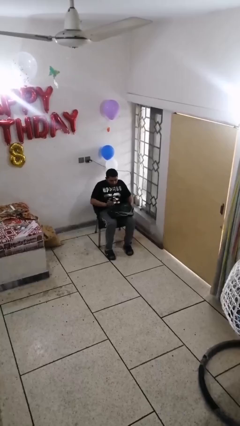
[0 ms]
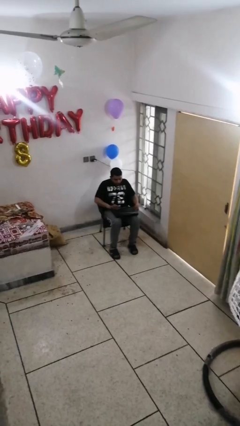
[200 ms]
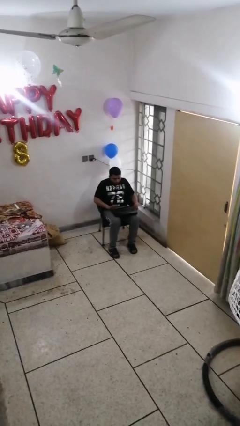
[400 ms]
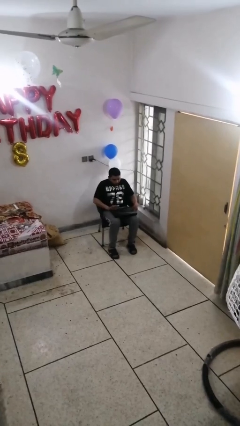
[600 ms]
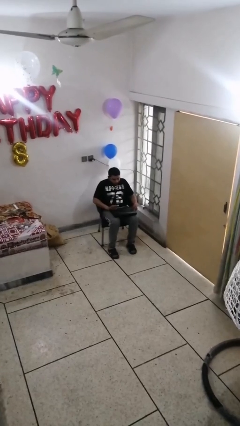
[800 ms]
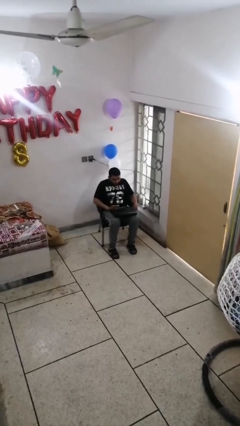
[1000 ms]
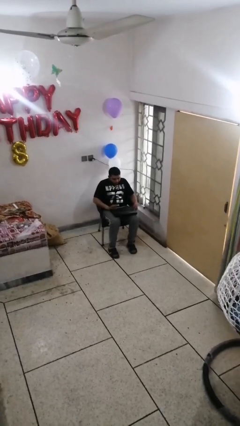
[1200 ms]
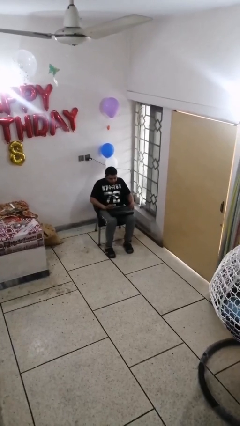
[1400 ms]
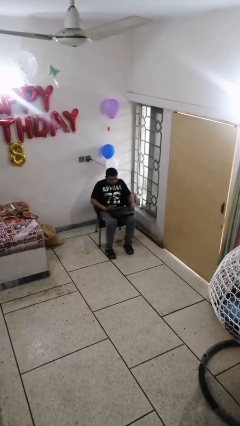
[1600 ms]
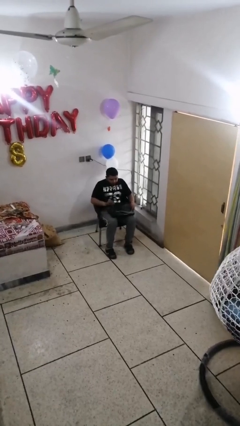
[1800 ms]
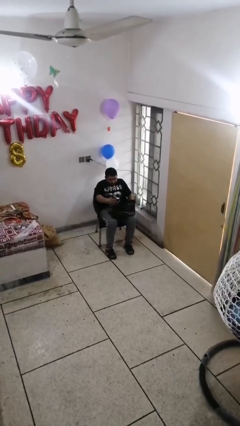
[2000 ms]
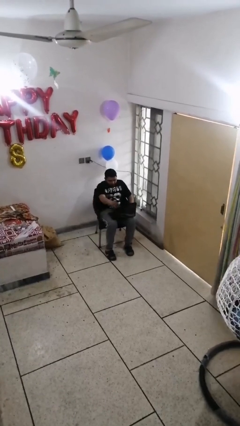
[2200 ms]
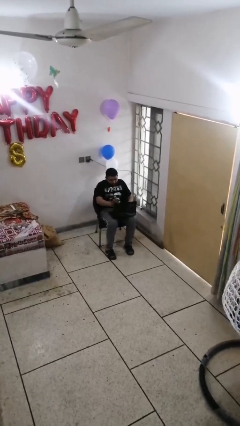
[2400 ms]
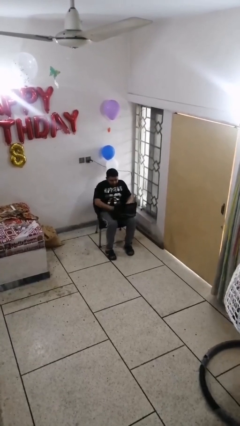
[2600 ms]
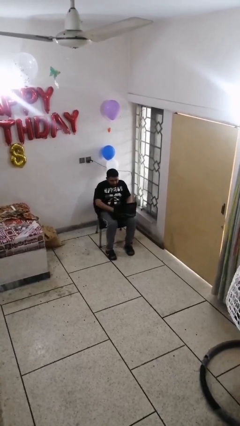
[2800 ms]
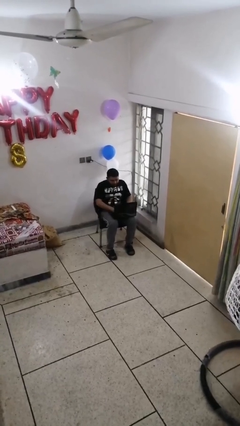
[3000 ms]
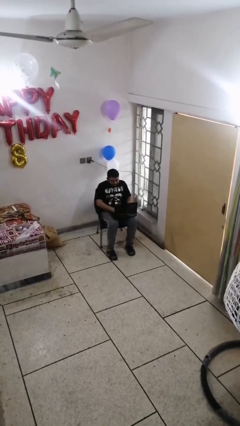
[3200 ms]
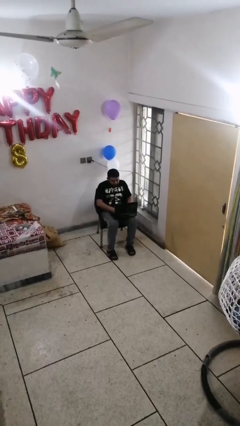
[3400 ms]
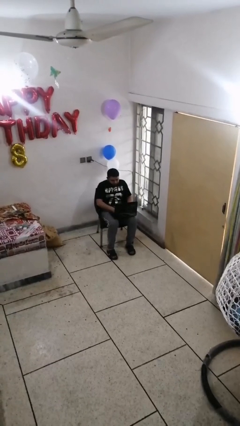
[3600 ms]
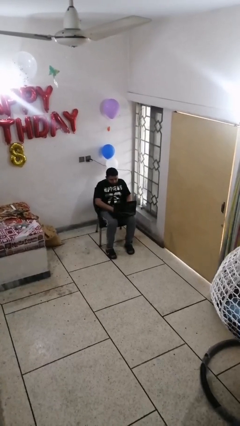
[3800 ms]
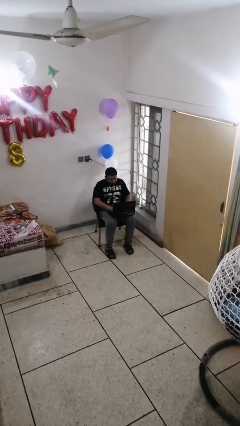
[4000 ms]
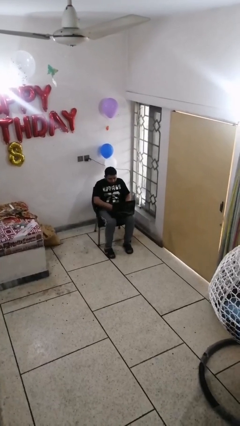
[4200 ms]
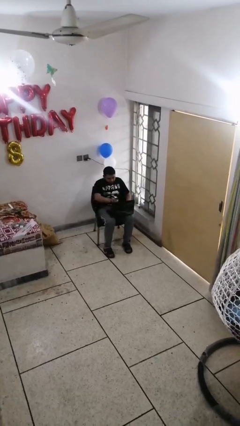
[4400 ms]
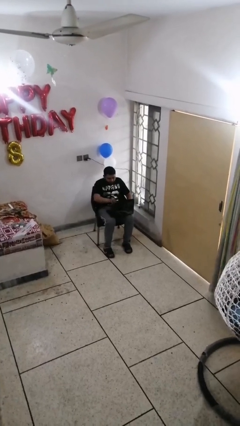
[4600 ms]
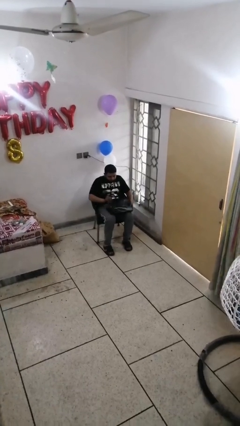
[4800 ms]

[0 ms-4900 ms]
person interacts with laptop

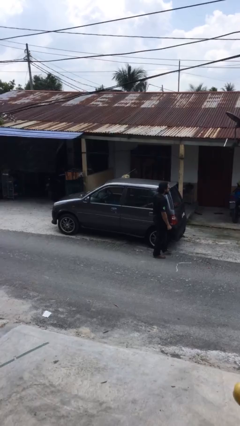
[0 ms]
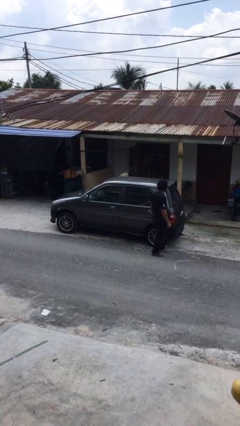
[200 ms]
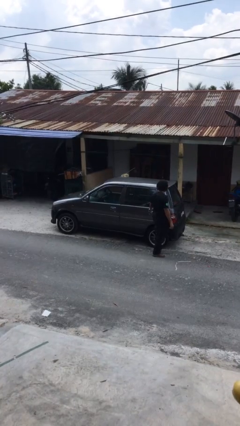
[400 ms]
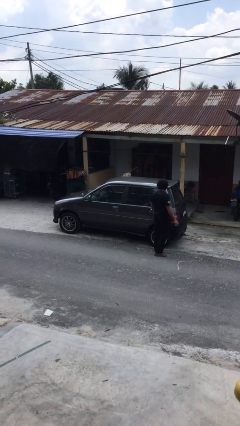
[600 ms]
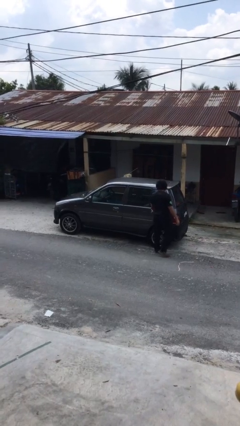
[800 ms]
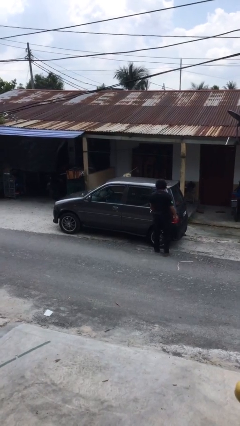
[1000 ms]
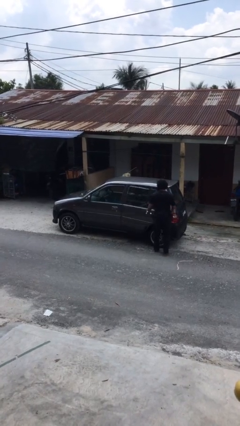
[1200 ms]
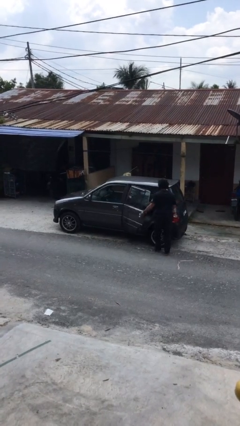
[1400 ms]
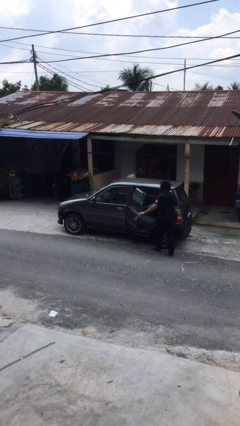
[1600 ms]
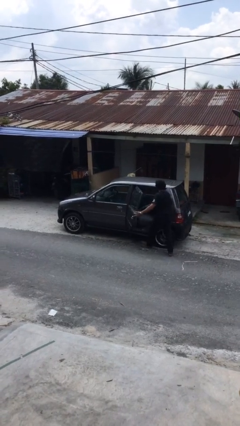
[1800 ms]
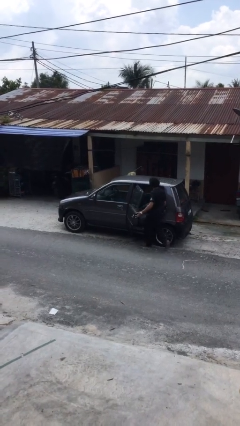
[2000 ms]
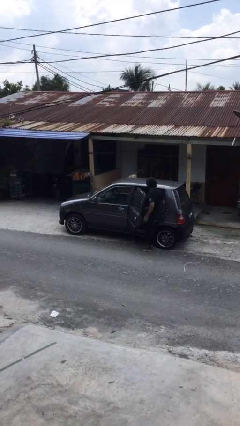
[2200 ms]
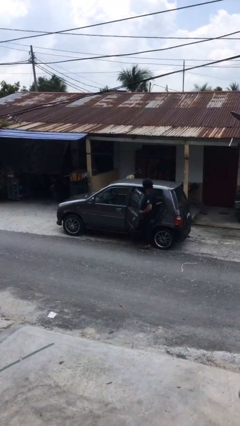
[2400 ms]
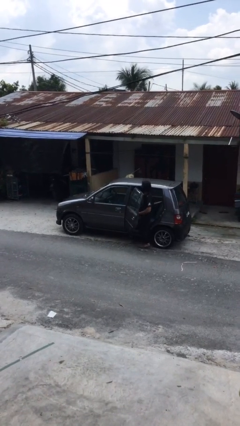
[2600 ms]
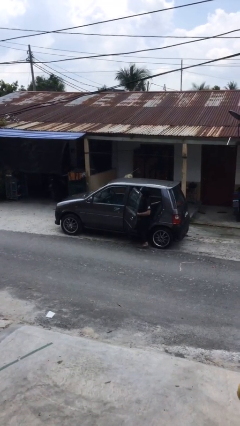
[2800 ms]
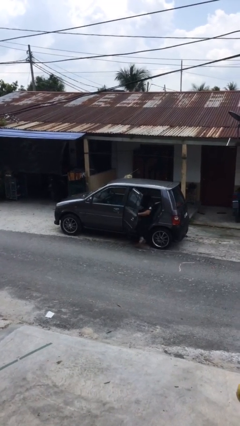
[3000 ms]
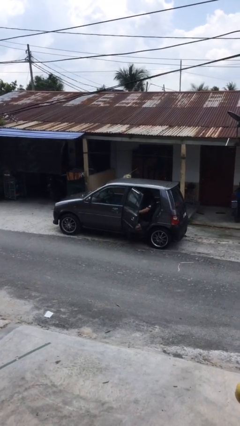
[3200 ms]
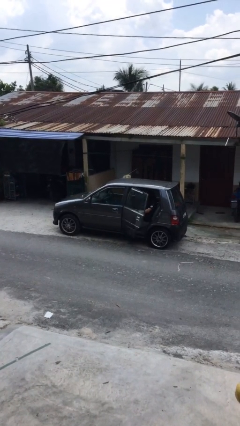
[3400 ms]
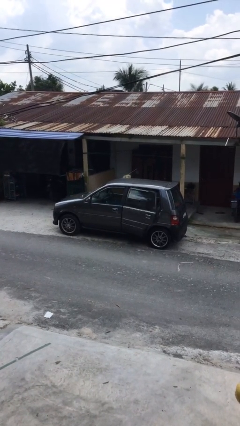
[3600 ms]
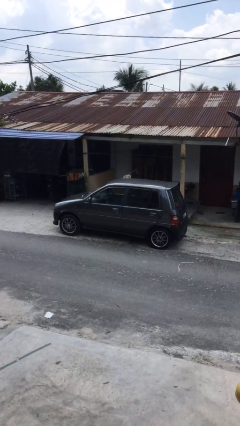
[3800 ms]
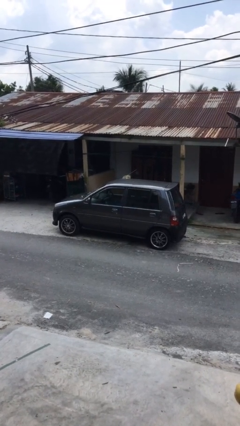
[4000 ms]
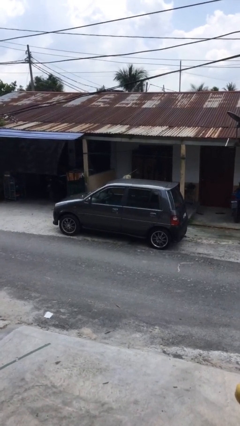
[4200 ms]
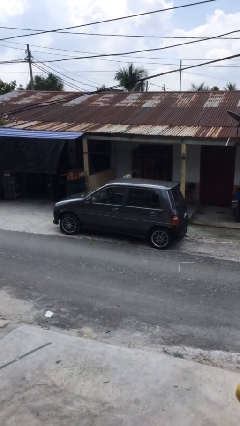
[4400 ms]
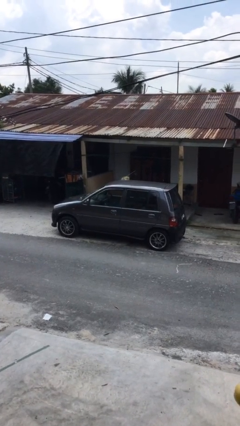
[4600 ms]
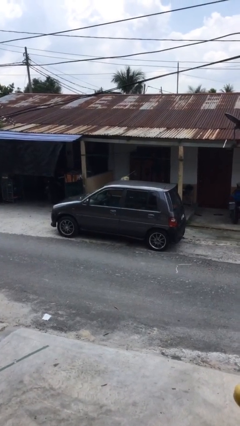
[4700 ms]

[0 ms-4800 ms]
car picks up person

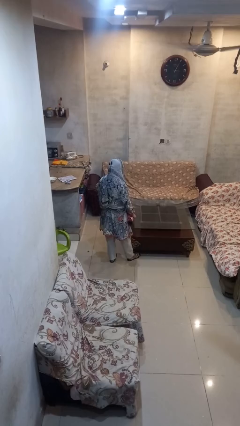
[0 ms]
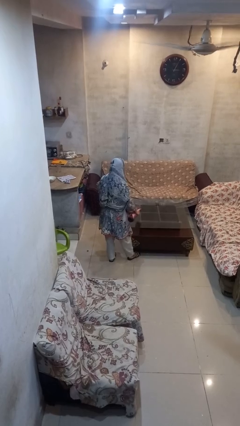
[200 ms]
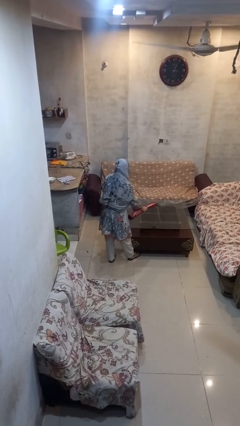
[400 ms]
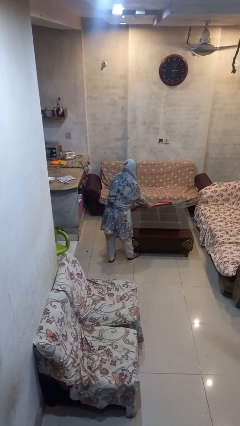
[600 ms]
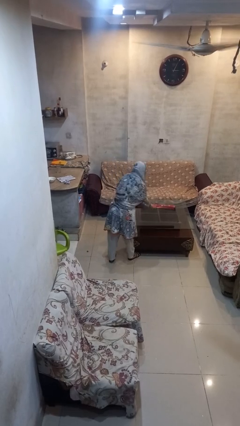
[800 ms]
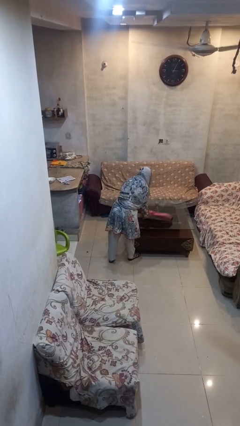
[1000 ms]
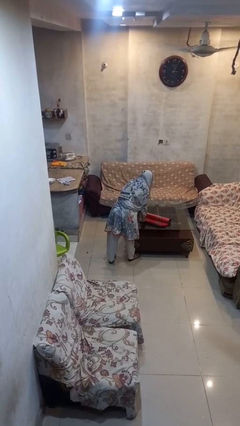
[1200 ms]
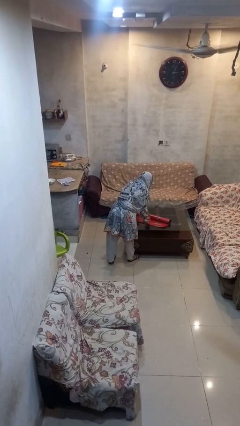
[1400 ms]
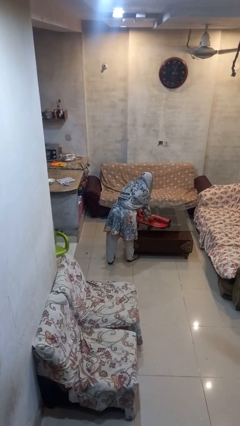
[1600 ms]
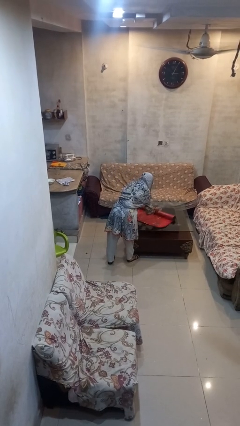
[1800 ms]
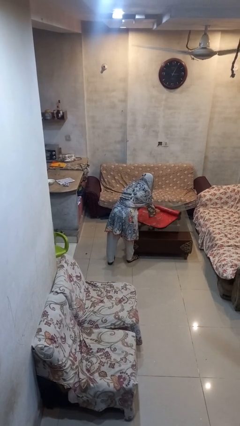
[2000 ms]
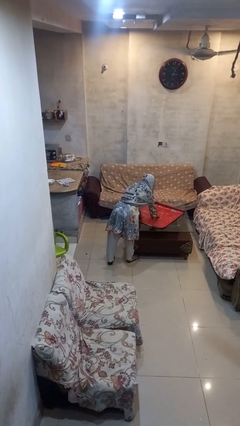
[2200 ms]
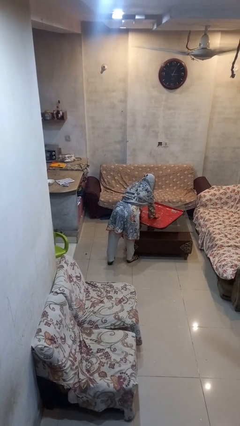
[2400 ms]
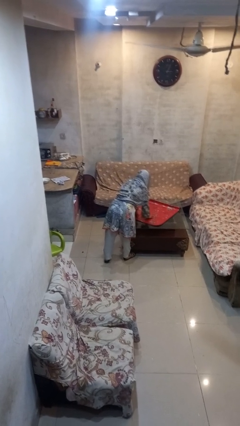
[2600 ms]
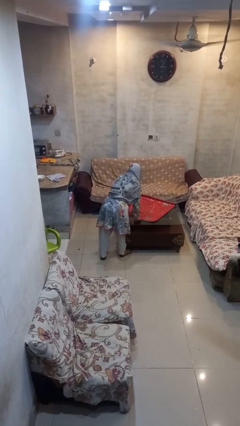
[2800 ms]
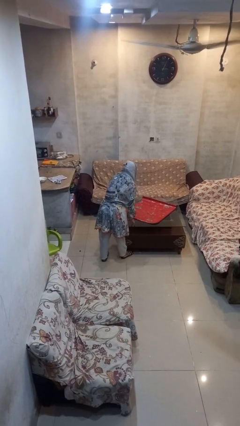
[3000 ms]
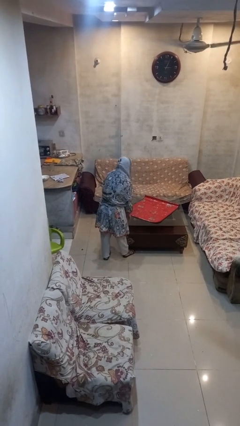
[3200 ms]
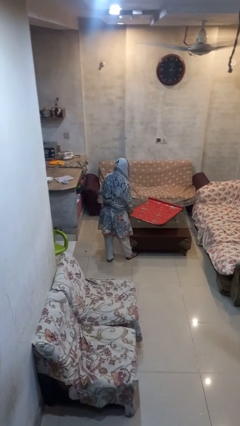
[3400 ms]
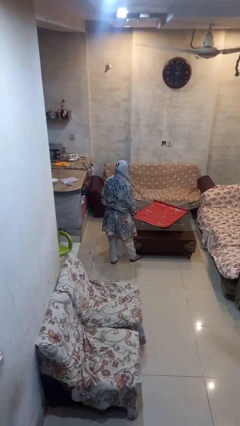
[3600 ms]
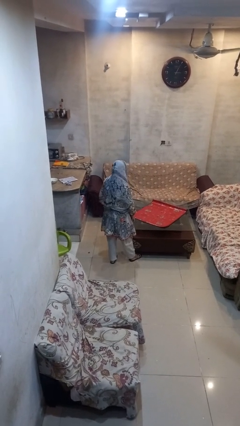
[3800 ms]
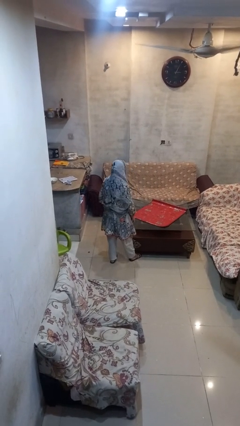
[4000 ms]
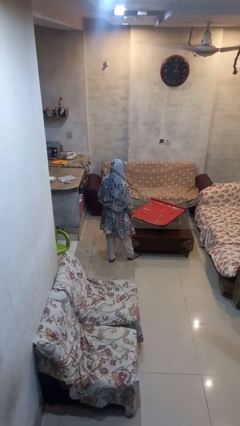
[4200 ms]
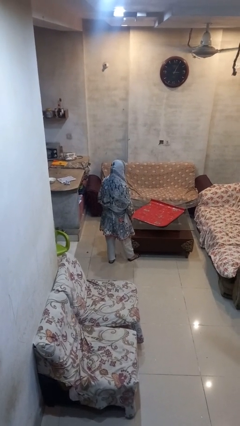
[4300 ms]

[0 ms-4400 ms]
person spreads tablecloth

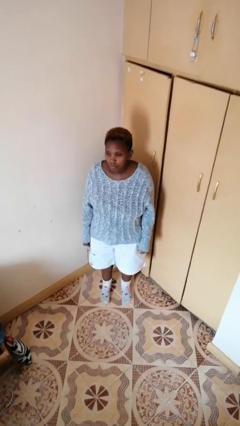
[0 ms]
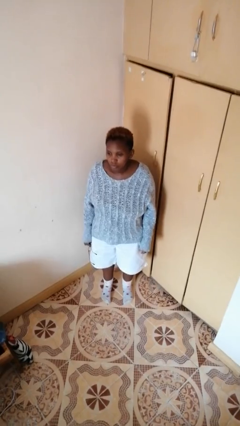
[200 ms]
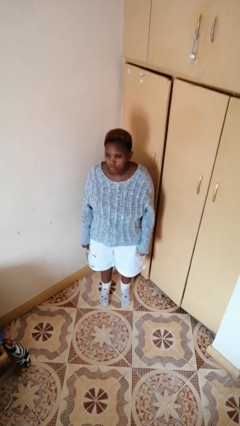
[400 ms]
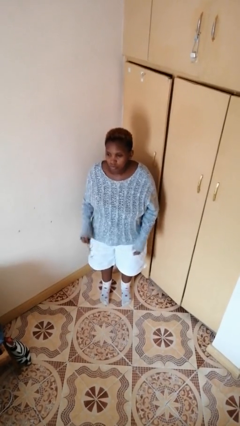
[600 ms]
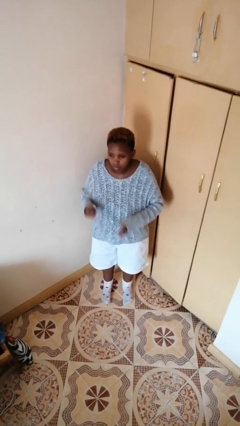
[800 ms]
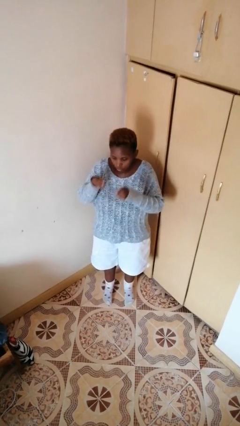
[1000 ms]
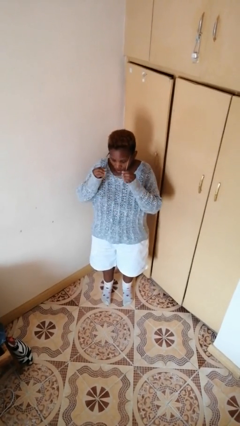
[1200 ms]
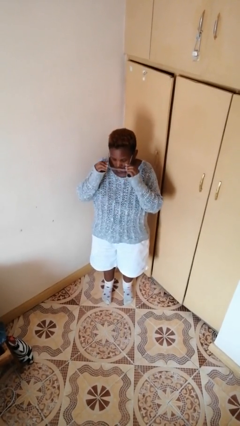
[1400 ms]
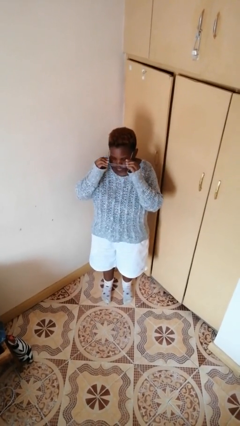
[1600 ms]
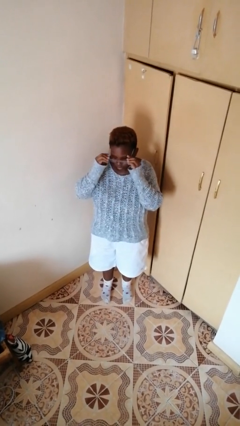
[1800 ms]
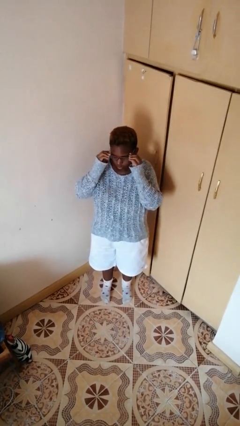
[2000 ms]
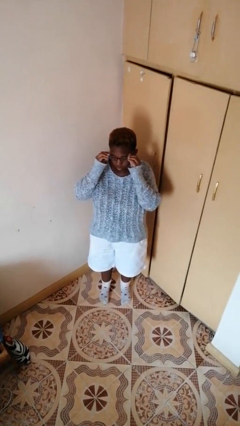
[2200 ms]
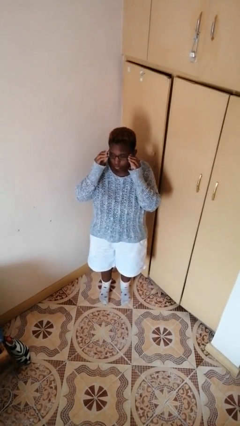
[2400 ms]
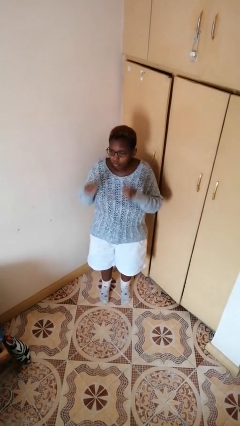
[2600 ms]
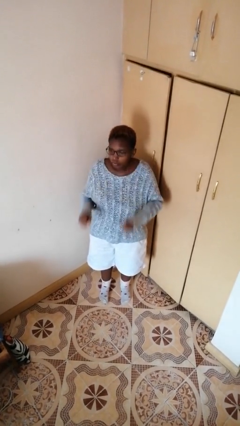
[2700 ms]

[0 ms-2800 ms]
person puts on glasses

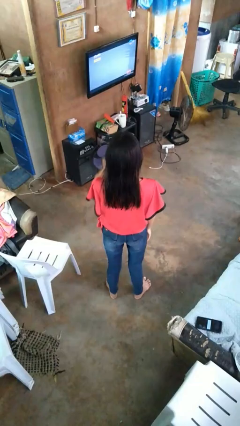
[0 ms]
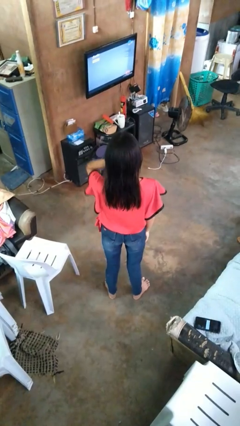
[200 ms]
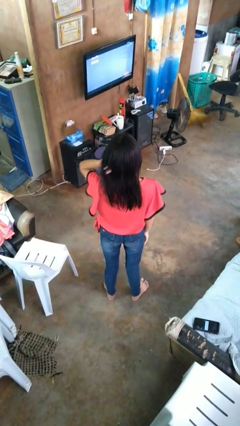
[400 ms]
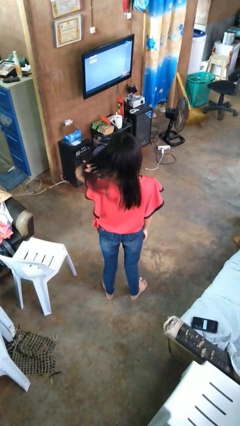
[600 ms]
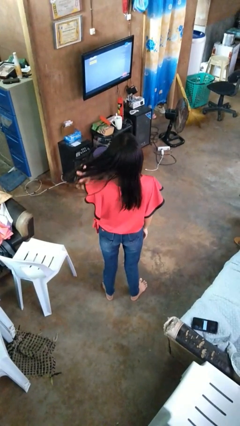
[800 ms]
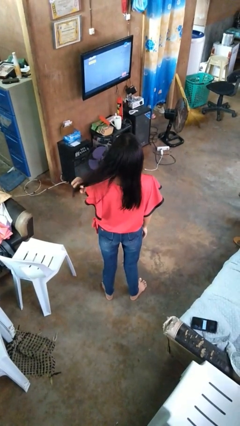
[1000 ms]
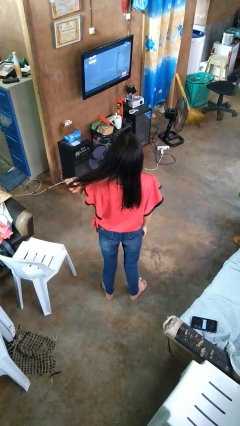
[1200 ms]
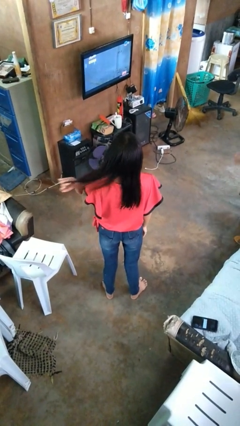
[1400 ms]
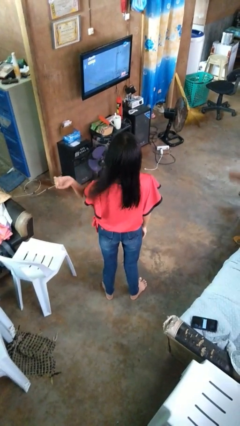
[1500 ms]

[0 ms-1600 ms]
person strokes hair
